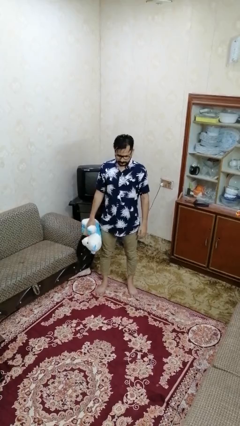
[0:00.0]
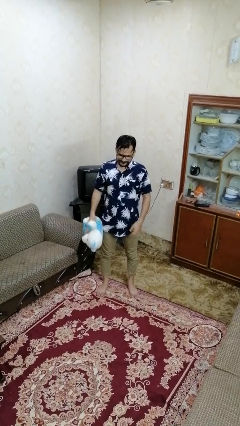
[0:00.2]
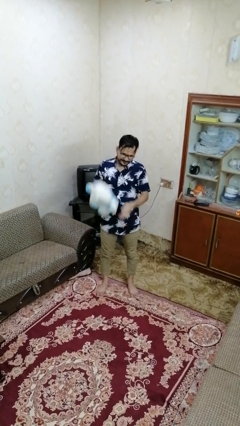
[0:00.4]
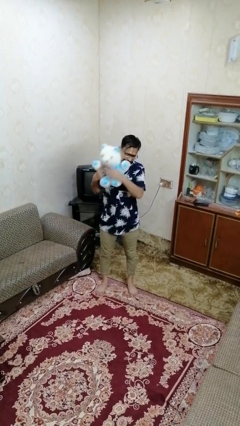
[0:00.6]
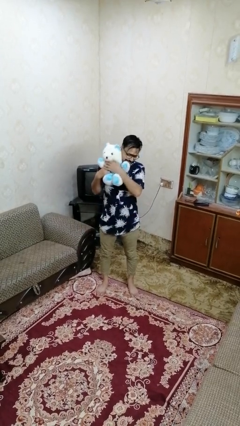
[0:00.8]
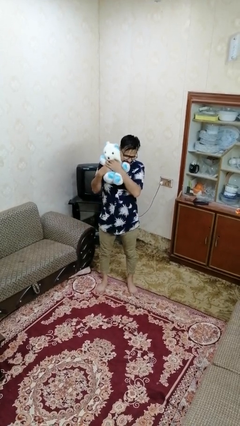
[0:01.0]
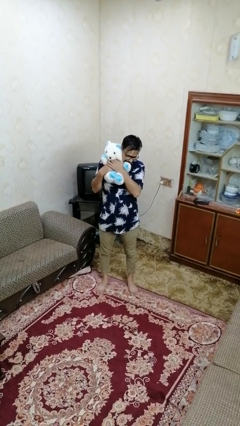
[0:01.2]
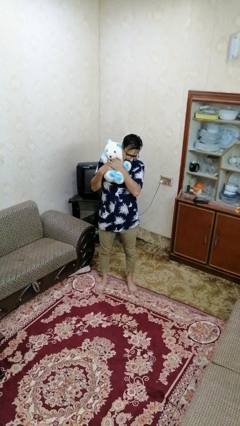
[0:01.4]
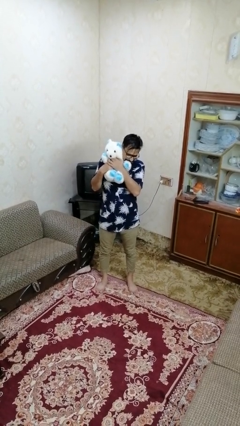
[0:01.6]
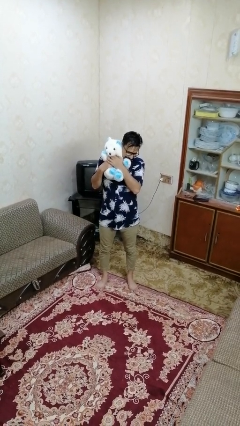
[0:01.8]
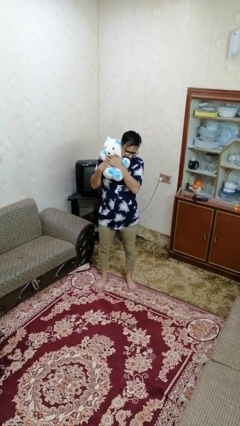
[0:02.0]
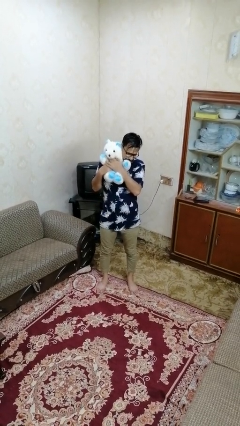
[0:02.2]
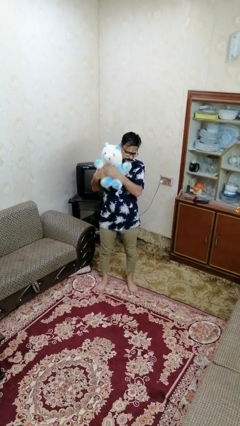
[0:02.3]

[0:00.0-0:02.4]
person hugs stuffed animal

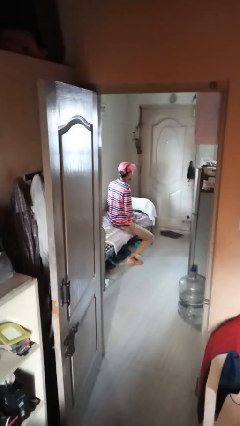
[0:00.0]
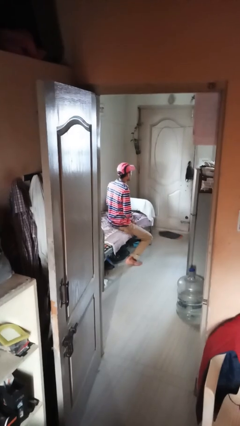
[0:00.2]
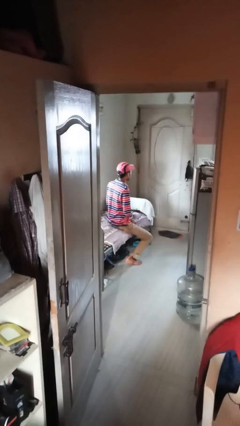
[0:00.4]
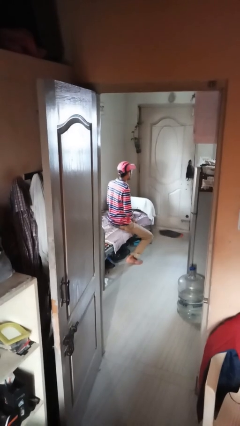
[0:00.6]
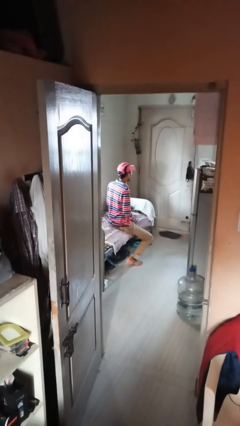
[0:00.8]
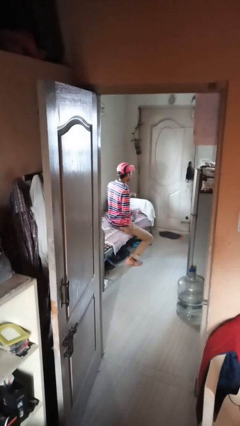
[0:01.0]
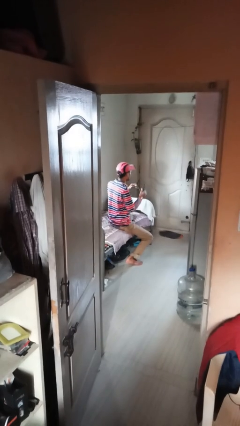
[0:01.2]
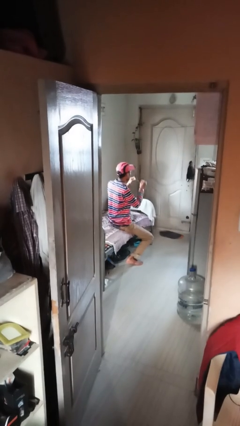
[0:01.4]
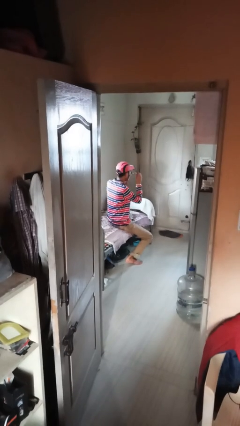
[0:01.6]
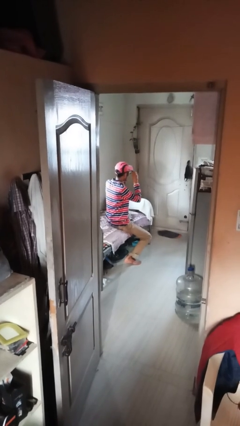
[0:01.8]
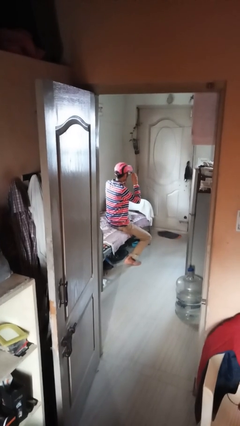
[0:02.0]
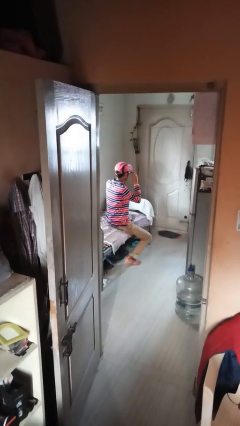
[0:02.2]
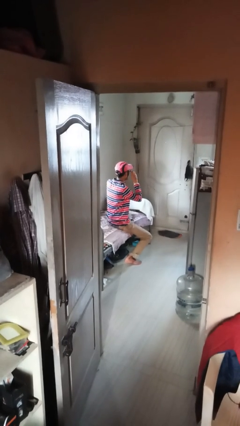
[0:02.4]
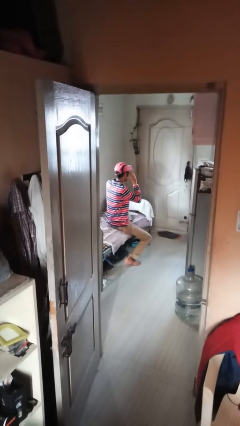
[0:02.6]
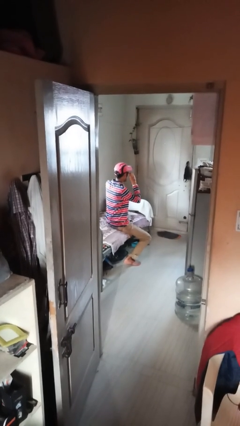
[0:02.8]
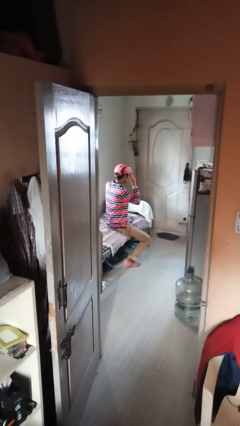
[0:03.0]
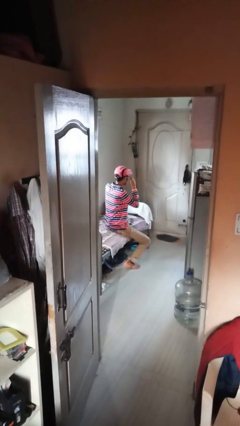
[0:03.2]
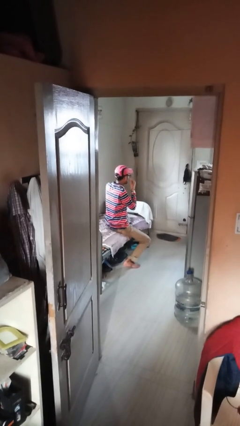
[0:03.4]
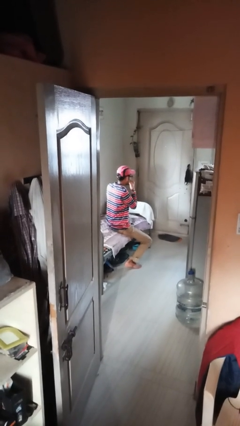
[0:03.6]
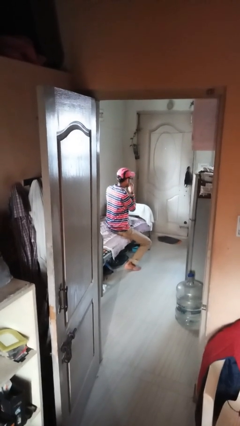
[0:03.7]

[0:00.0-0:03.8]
person puts on glasses

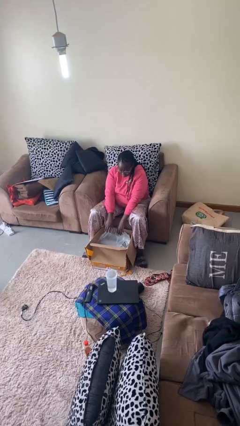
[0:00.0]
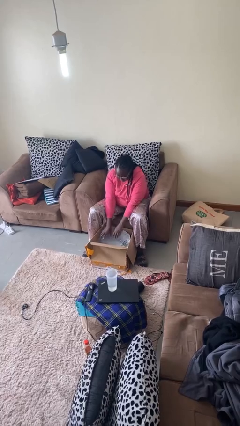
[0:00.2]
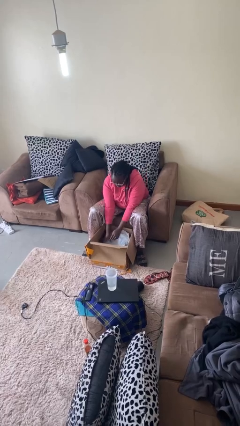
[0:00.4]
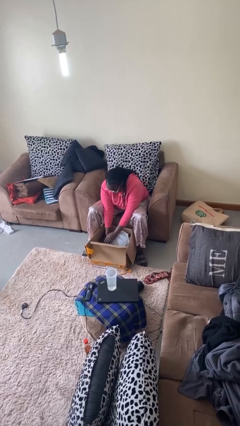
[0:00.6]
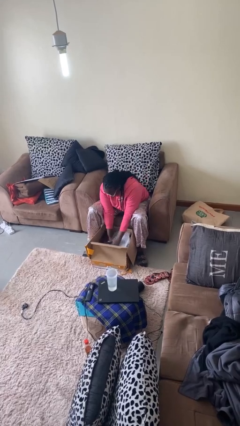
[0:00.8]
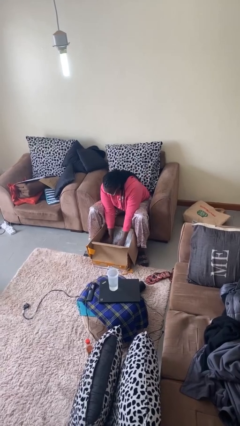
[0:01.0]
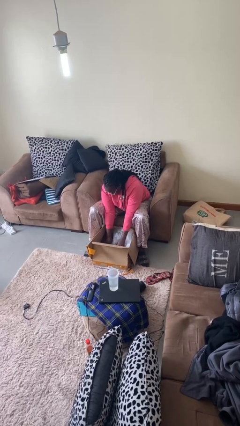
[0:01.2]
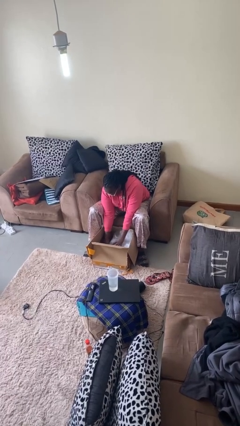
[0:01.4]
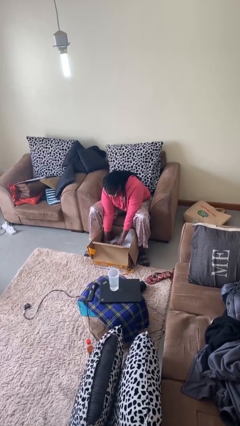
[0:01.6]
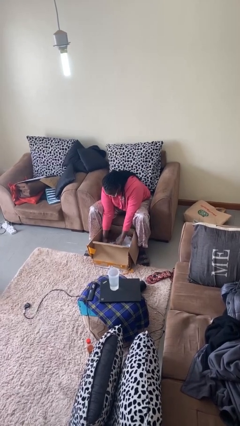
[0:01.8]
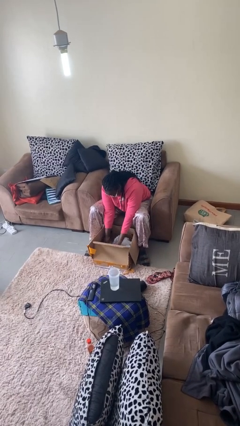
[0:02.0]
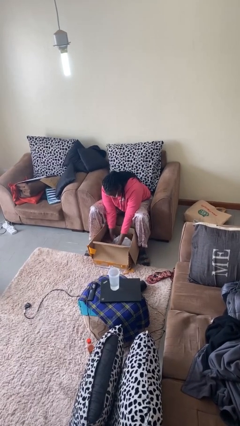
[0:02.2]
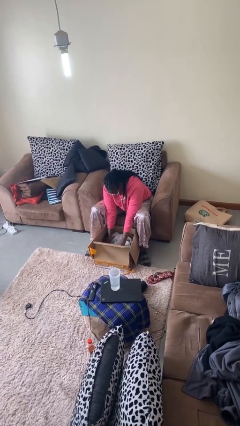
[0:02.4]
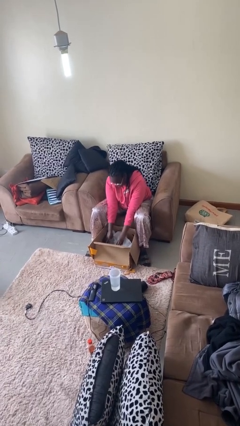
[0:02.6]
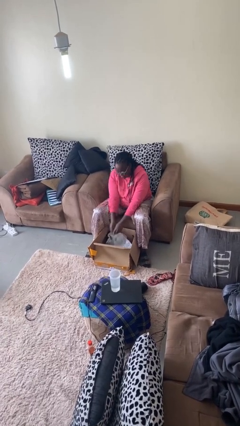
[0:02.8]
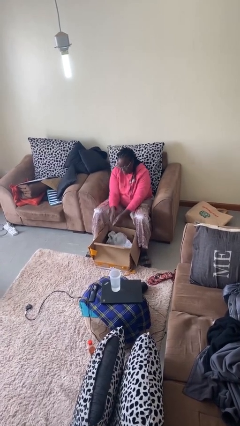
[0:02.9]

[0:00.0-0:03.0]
person searches in box

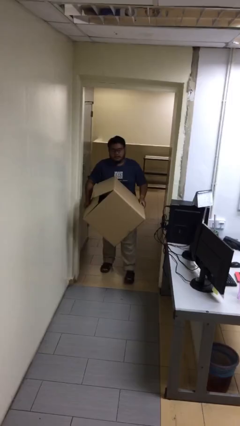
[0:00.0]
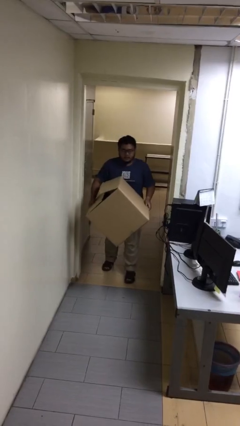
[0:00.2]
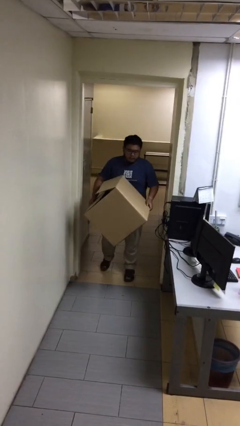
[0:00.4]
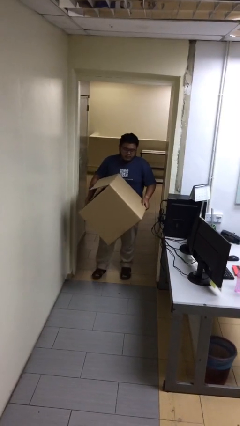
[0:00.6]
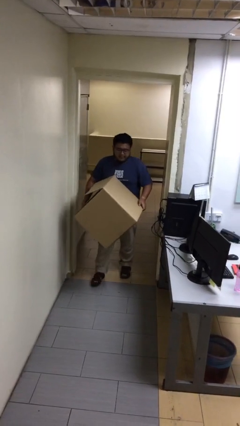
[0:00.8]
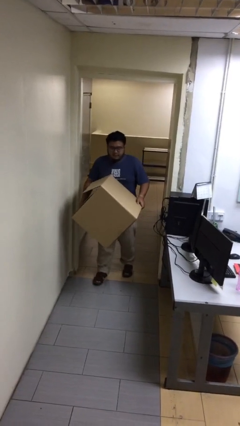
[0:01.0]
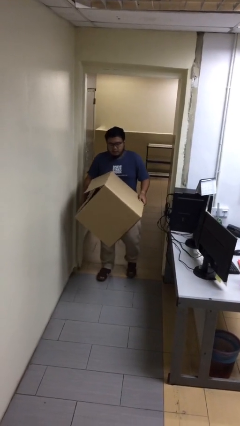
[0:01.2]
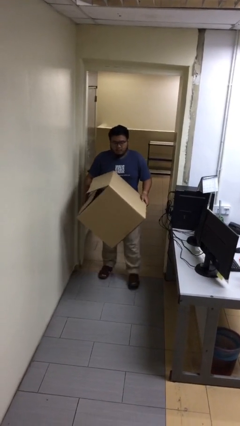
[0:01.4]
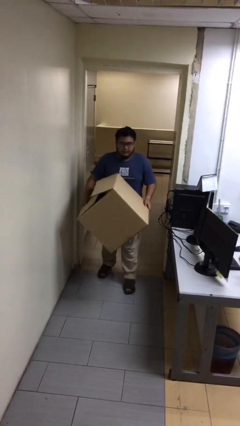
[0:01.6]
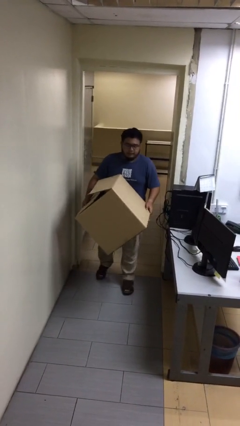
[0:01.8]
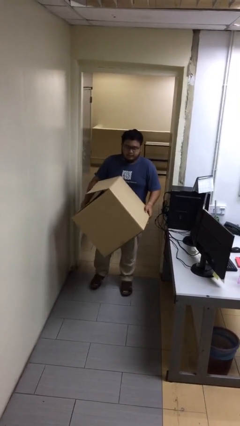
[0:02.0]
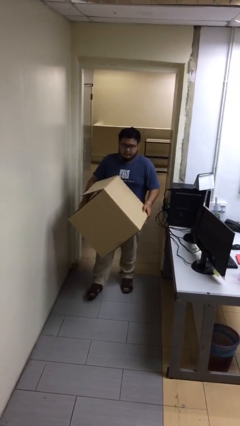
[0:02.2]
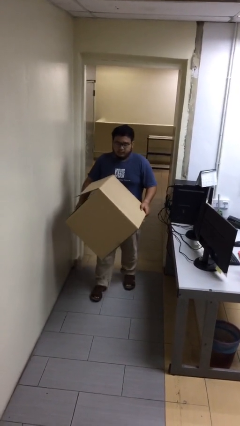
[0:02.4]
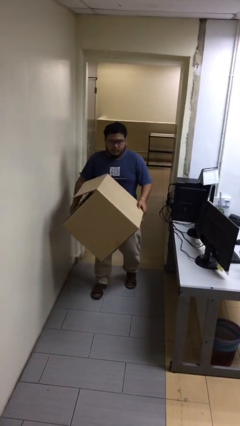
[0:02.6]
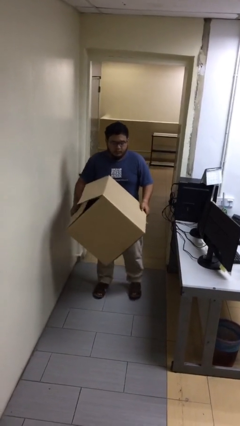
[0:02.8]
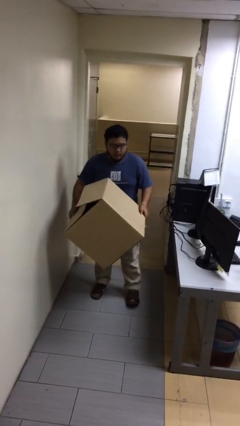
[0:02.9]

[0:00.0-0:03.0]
person carries heavy object

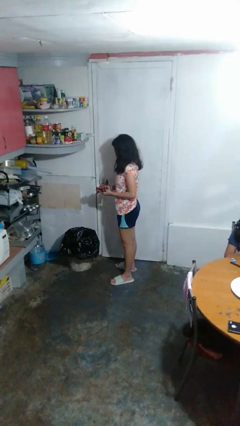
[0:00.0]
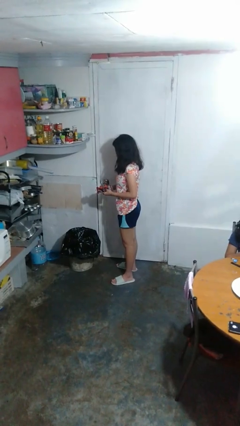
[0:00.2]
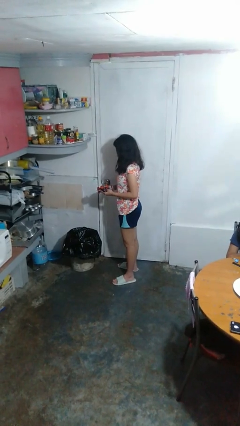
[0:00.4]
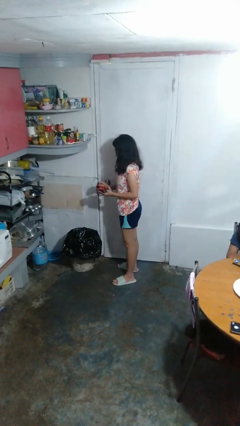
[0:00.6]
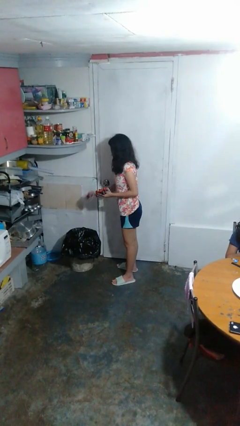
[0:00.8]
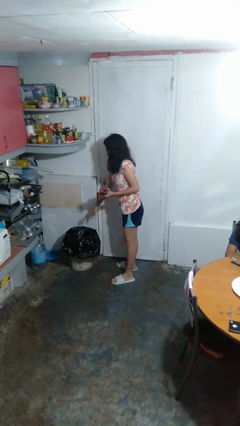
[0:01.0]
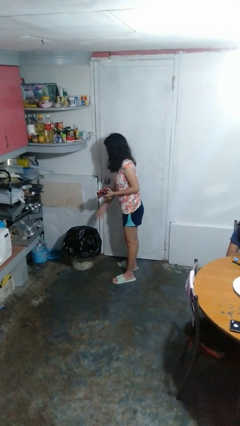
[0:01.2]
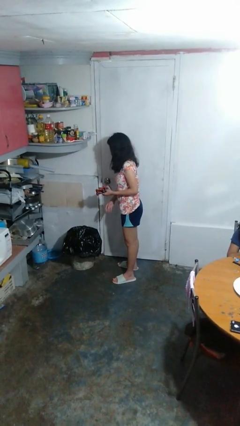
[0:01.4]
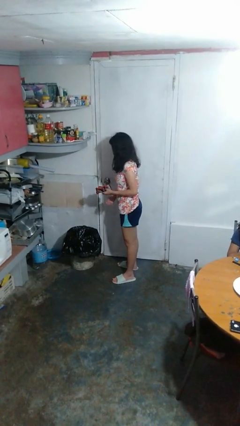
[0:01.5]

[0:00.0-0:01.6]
person discards trash

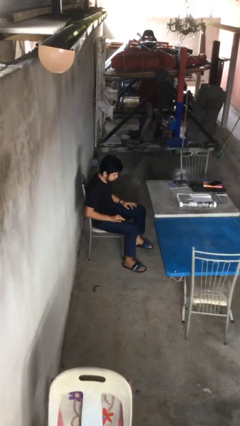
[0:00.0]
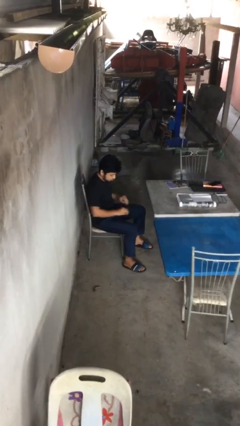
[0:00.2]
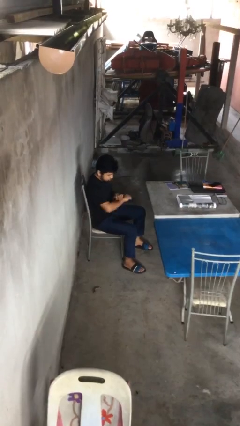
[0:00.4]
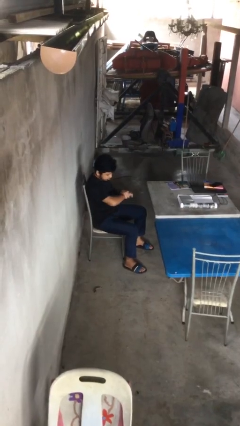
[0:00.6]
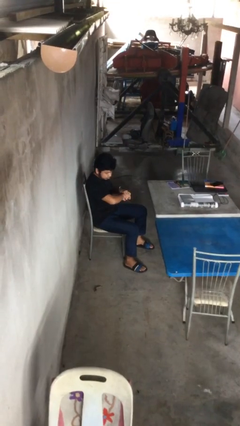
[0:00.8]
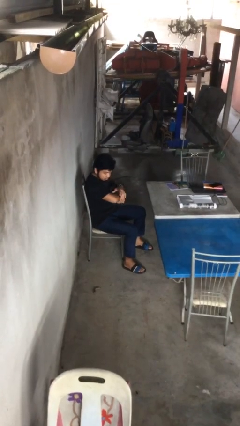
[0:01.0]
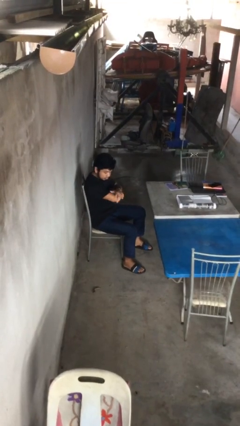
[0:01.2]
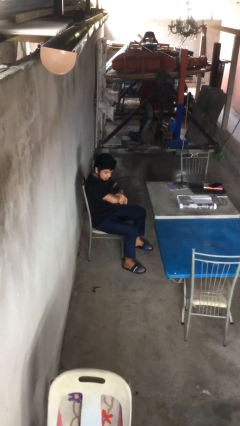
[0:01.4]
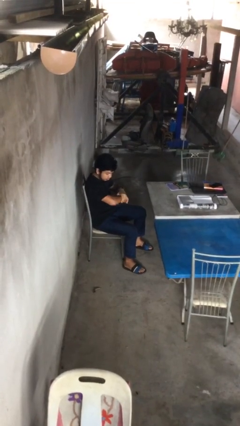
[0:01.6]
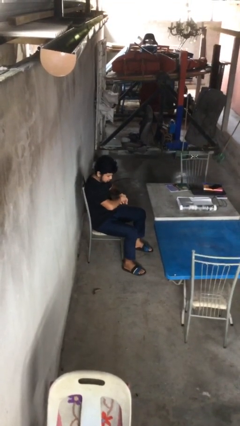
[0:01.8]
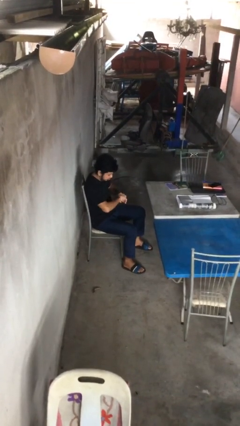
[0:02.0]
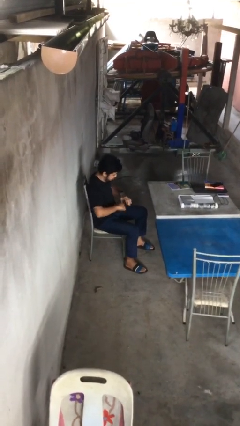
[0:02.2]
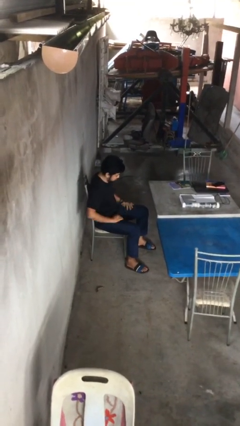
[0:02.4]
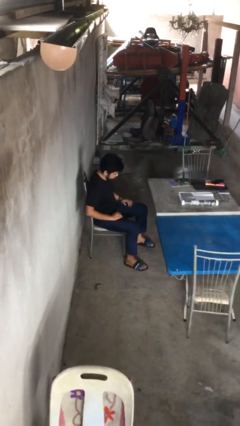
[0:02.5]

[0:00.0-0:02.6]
person looks at hands in lap

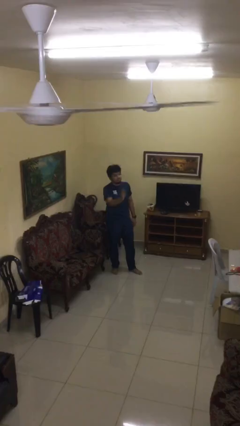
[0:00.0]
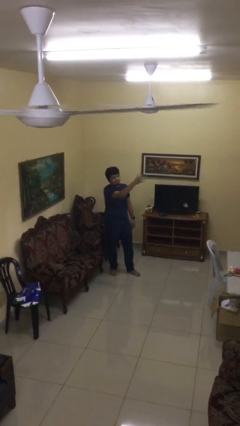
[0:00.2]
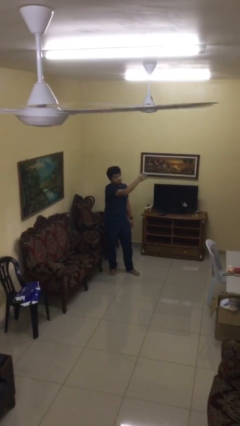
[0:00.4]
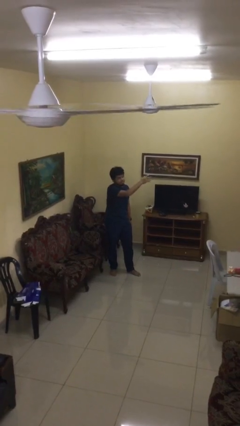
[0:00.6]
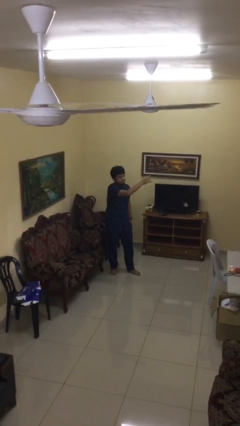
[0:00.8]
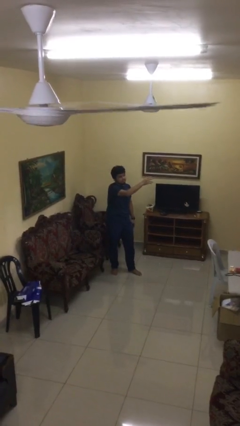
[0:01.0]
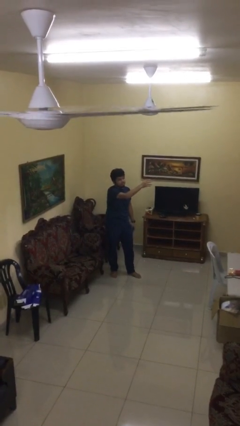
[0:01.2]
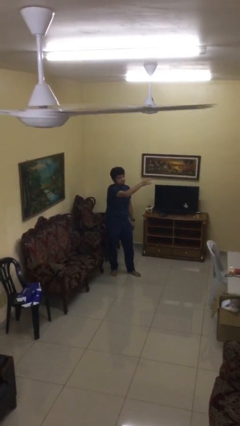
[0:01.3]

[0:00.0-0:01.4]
person gestures swipe left
